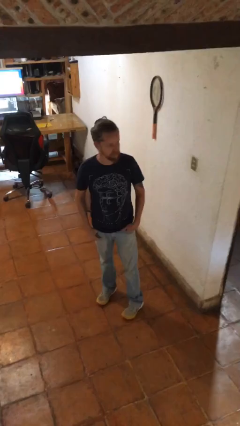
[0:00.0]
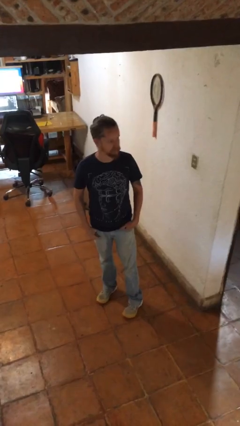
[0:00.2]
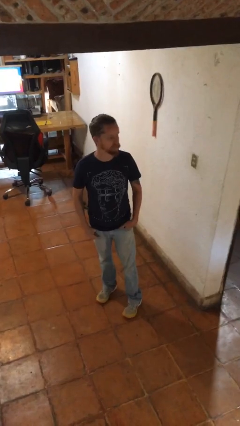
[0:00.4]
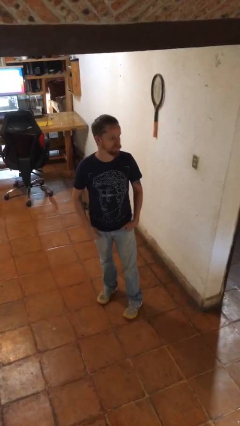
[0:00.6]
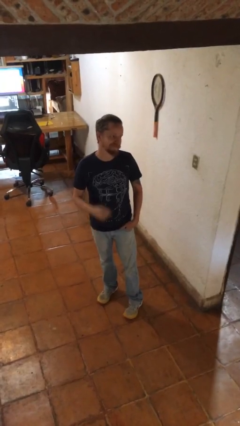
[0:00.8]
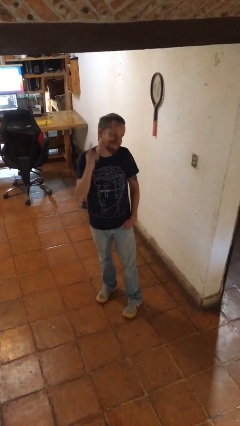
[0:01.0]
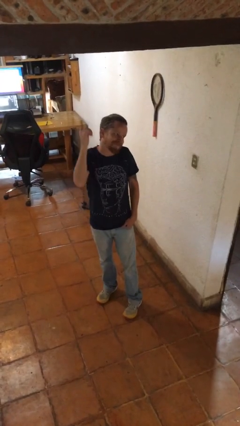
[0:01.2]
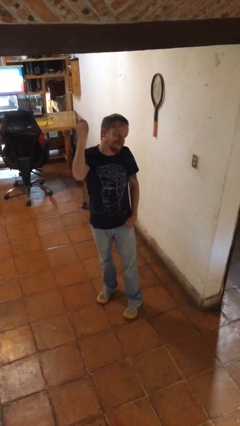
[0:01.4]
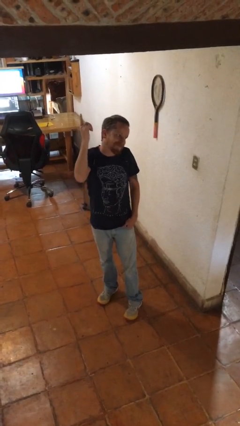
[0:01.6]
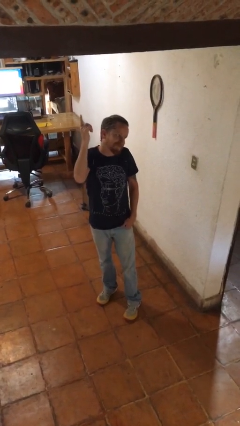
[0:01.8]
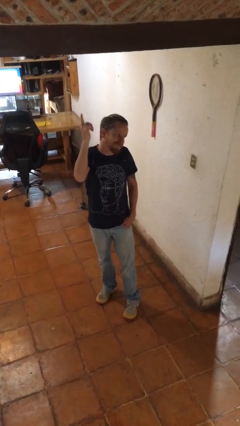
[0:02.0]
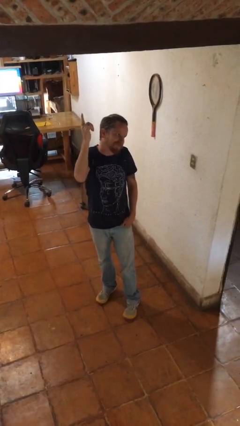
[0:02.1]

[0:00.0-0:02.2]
person gestures raise hand

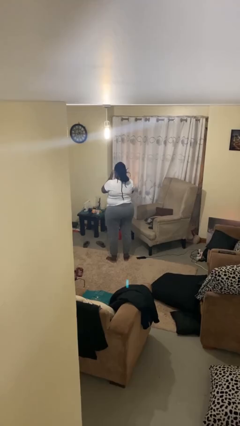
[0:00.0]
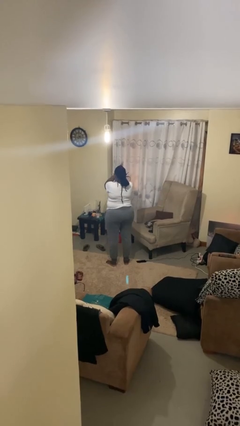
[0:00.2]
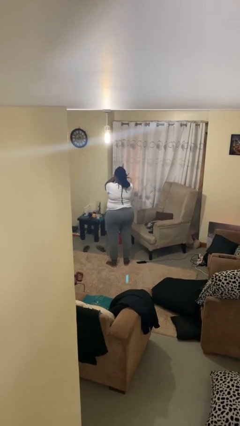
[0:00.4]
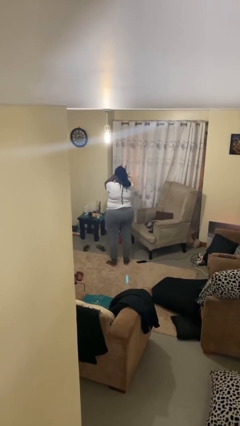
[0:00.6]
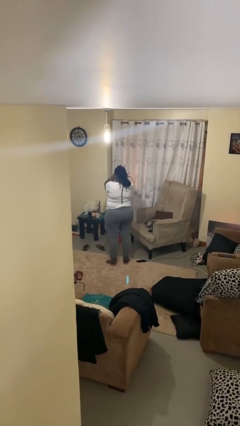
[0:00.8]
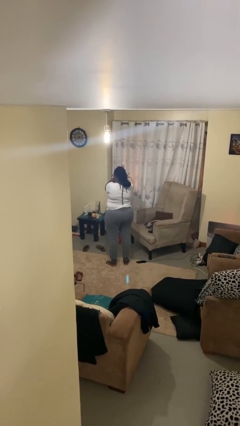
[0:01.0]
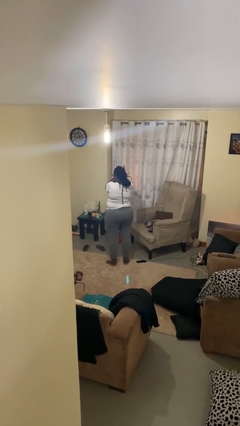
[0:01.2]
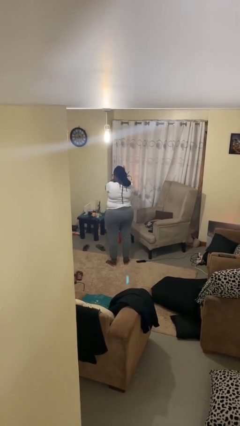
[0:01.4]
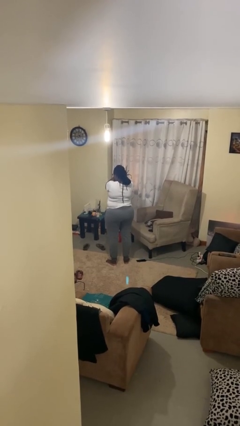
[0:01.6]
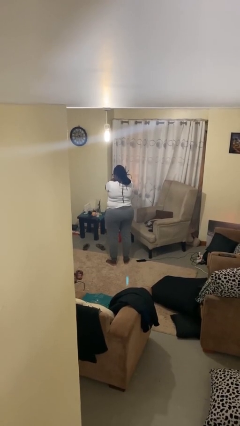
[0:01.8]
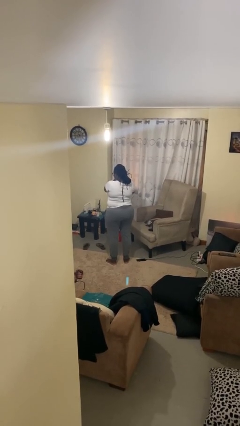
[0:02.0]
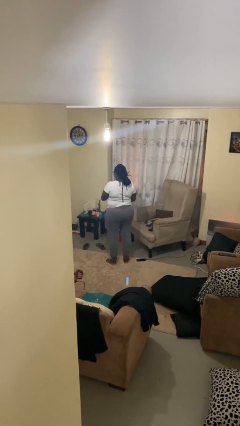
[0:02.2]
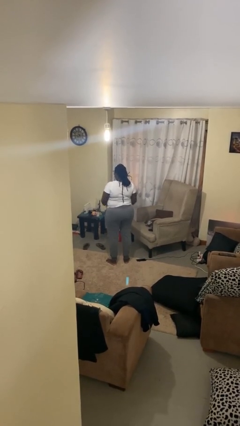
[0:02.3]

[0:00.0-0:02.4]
person claps hands

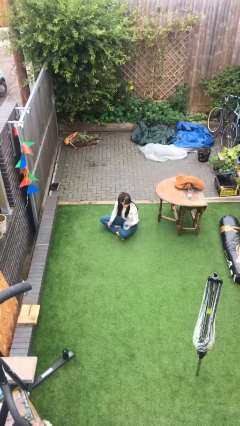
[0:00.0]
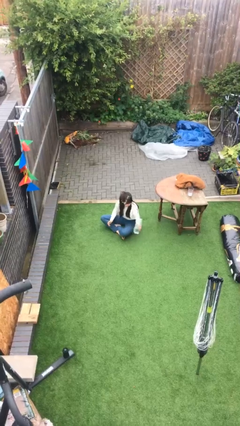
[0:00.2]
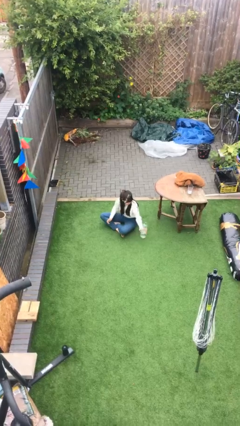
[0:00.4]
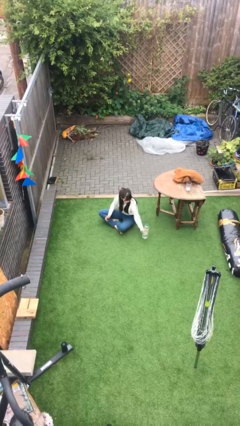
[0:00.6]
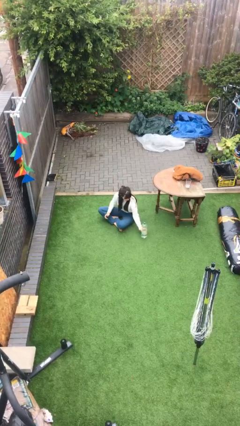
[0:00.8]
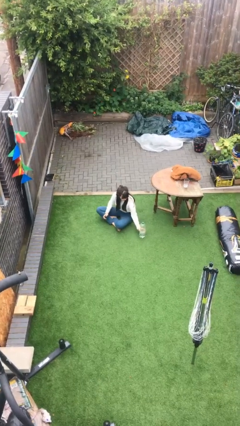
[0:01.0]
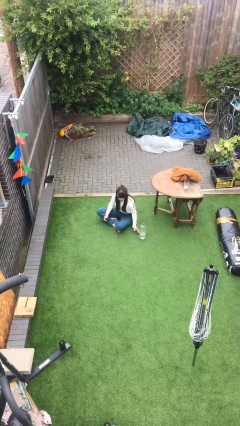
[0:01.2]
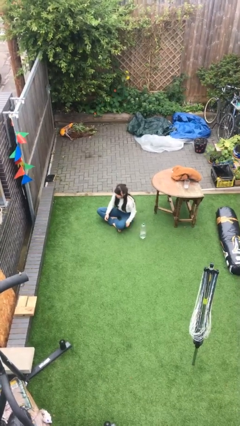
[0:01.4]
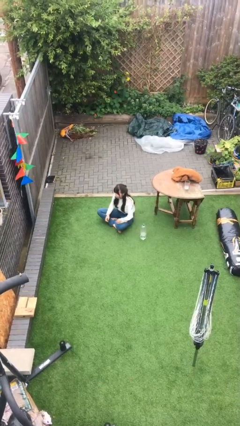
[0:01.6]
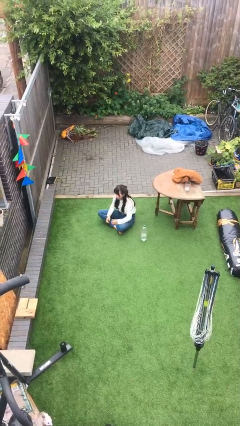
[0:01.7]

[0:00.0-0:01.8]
person puts down object on floor

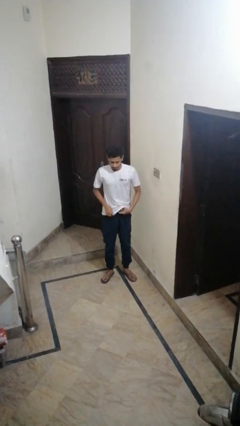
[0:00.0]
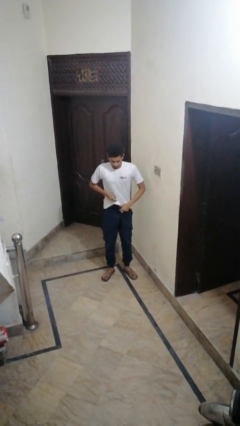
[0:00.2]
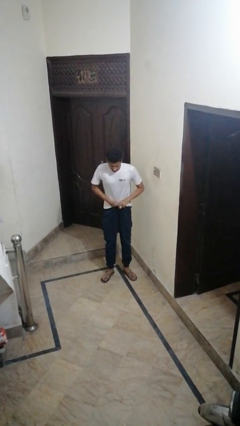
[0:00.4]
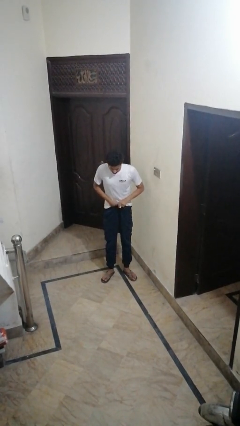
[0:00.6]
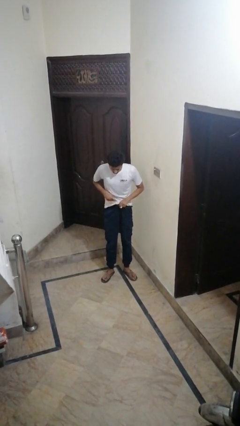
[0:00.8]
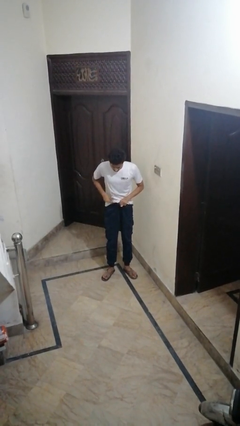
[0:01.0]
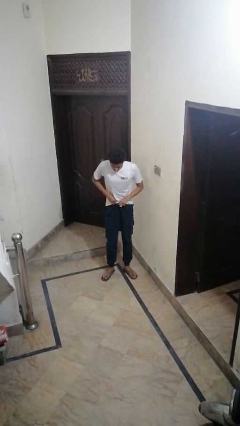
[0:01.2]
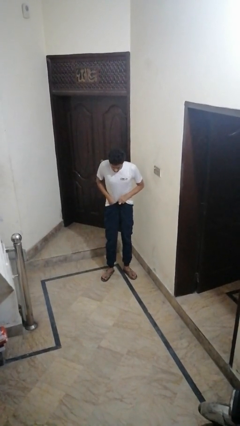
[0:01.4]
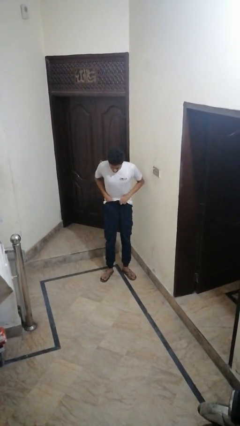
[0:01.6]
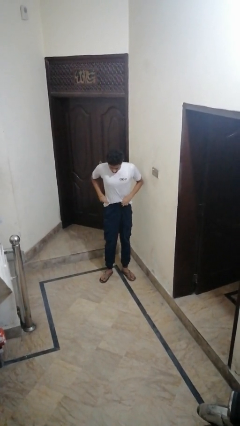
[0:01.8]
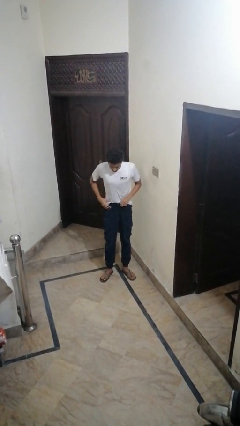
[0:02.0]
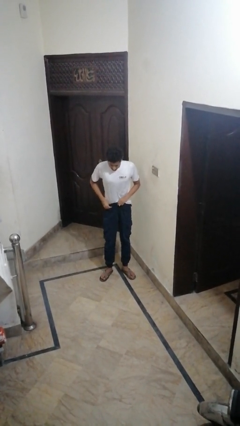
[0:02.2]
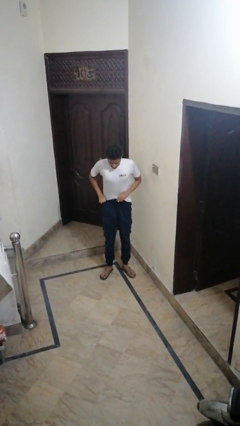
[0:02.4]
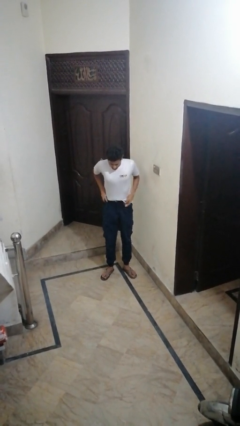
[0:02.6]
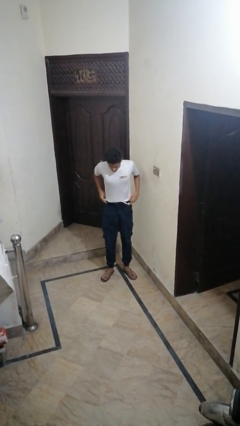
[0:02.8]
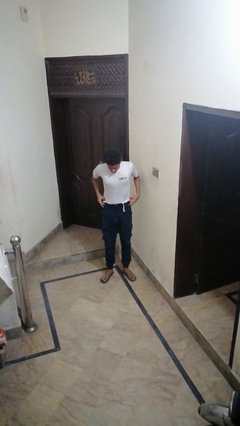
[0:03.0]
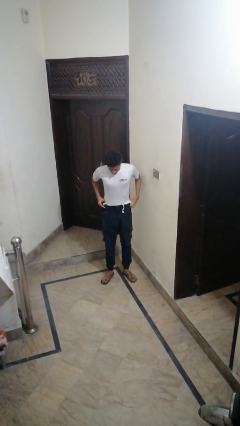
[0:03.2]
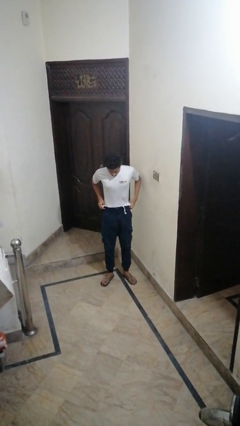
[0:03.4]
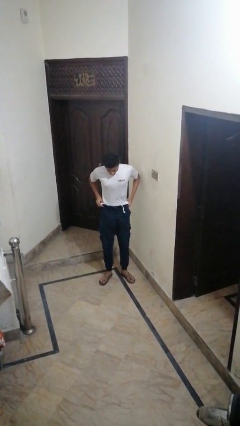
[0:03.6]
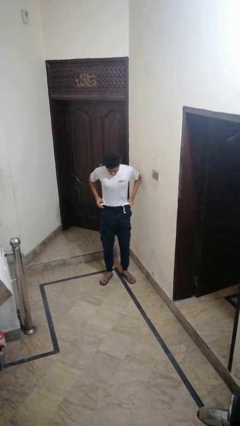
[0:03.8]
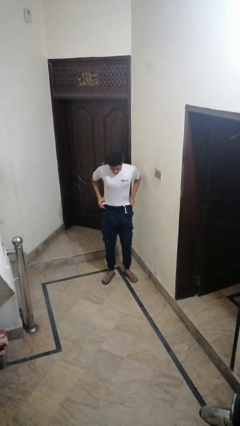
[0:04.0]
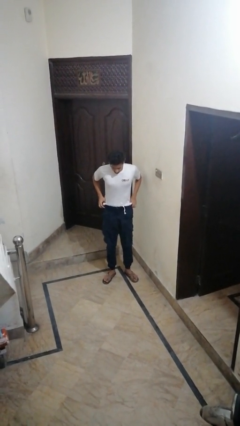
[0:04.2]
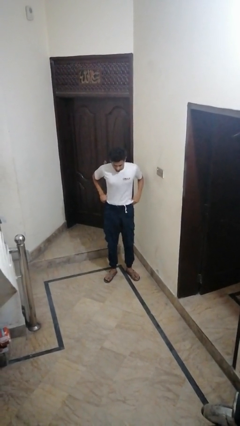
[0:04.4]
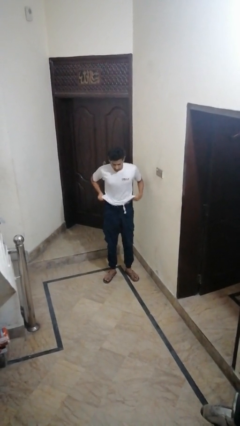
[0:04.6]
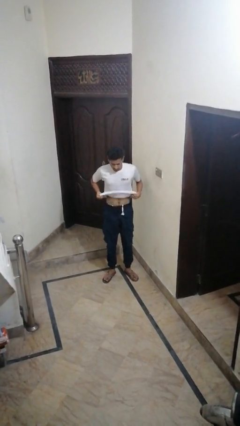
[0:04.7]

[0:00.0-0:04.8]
person tucks in shirt

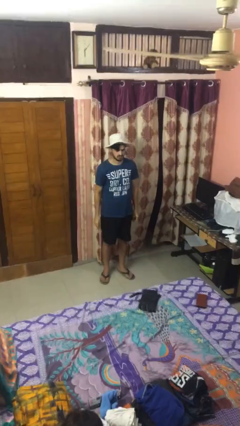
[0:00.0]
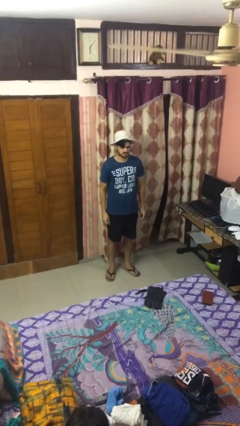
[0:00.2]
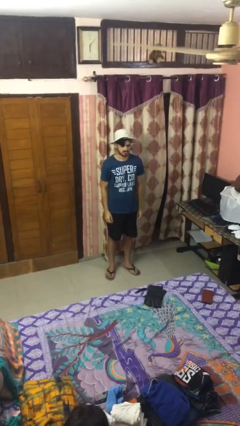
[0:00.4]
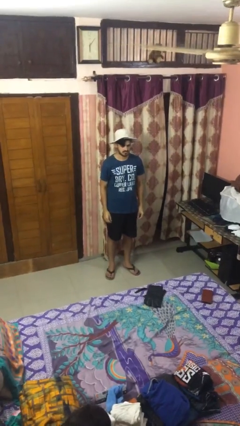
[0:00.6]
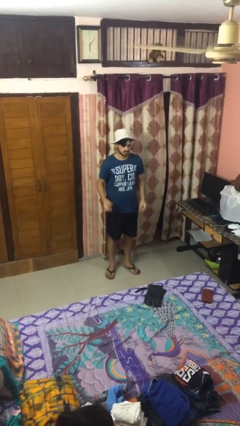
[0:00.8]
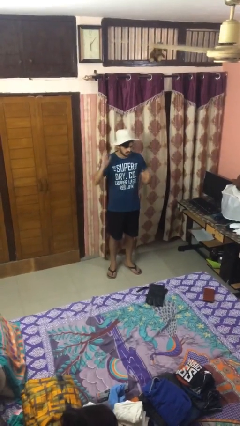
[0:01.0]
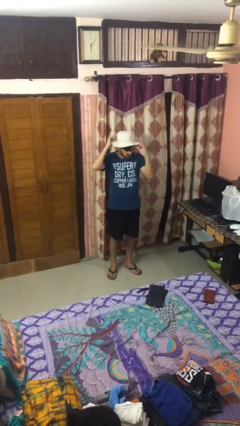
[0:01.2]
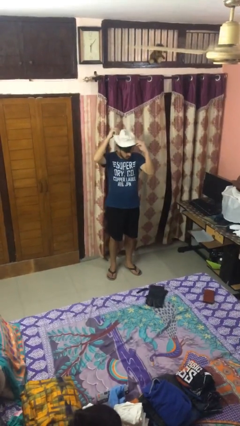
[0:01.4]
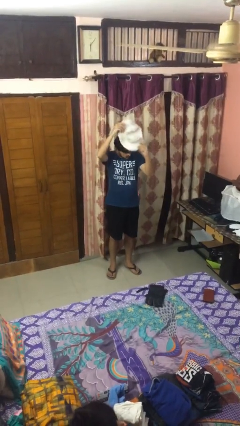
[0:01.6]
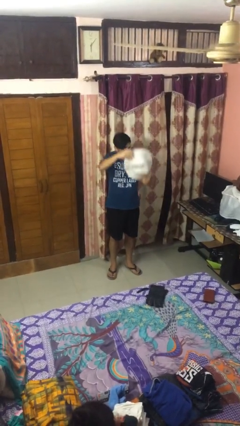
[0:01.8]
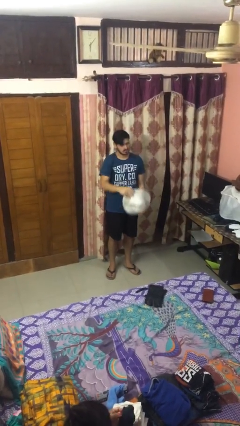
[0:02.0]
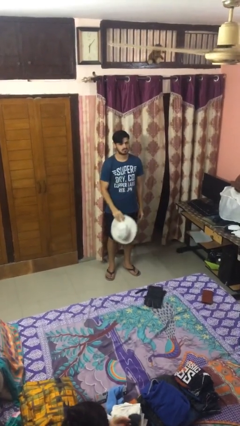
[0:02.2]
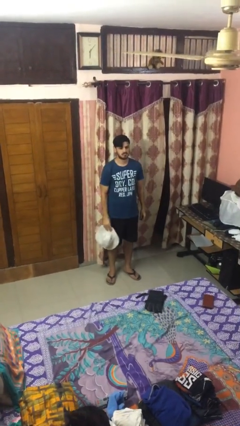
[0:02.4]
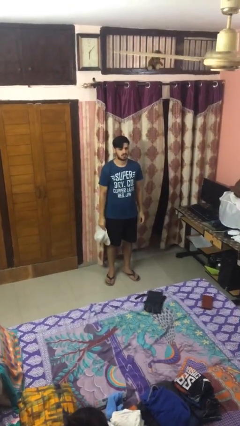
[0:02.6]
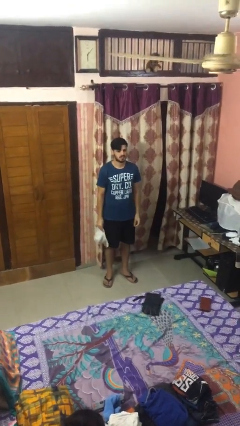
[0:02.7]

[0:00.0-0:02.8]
person takes off hat

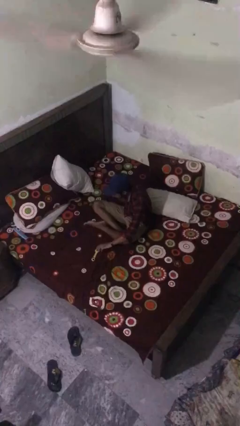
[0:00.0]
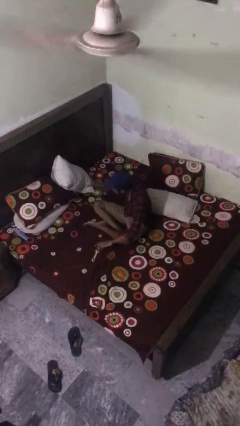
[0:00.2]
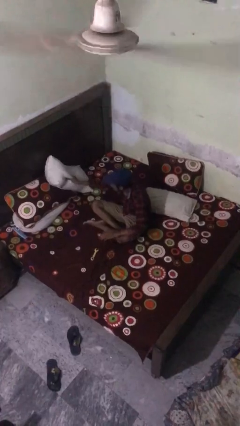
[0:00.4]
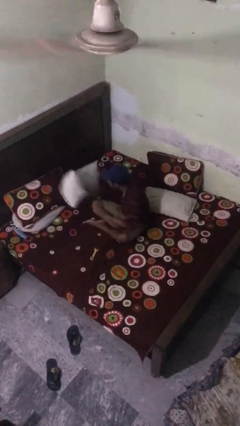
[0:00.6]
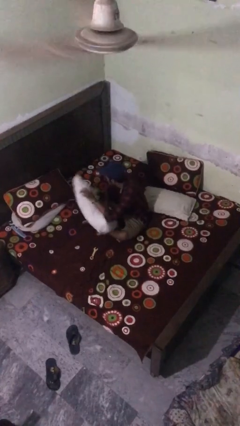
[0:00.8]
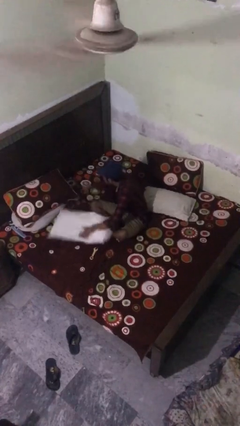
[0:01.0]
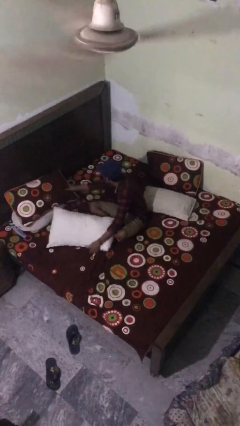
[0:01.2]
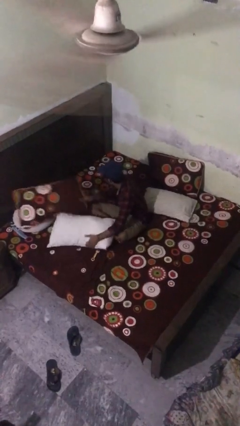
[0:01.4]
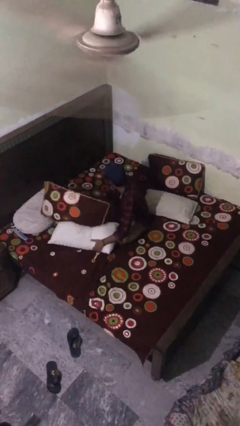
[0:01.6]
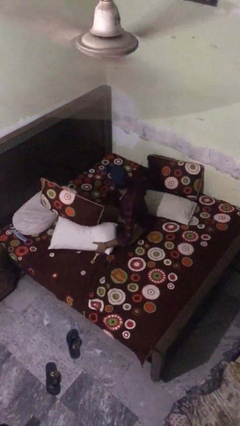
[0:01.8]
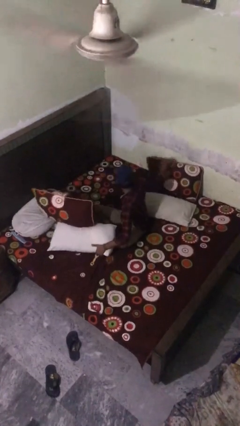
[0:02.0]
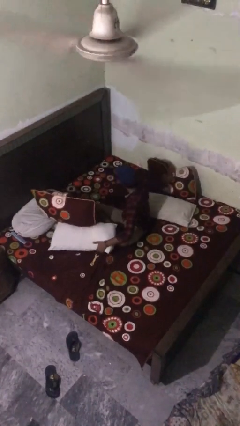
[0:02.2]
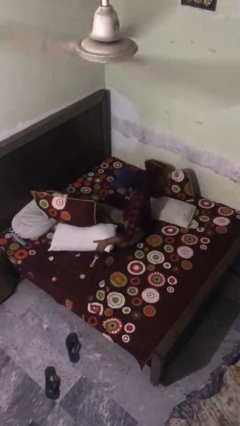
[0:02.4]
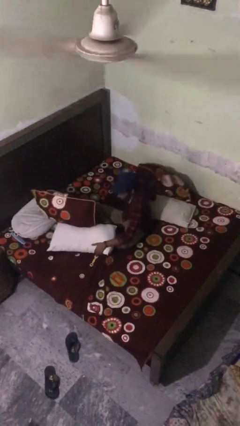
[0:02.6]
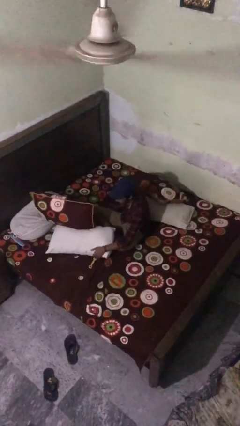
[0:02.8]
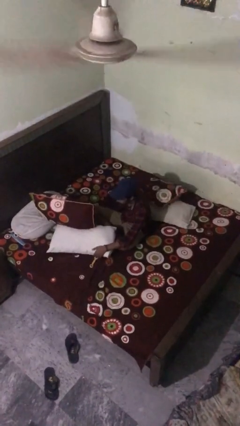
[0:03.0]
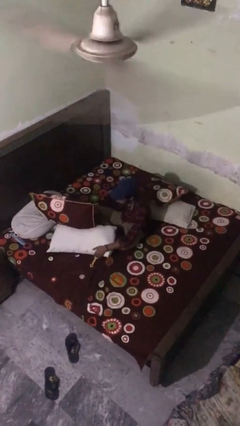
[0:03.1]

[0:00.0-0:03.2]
person searches under bed

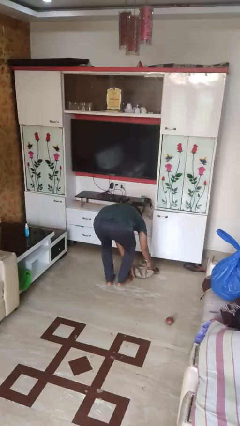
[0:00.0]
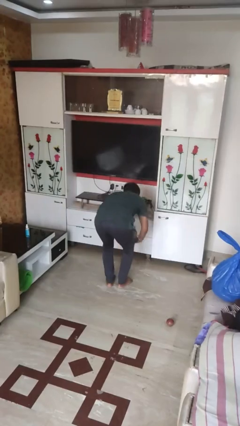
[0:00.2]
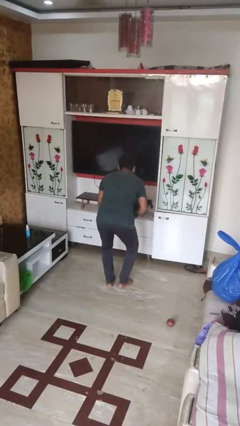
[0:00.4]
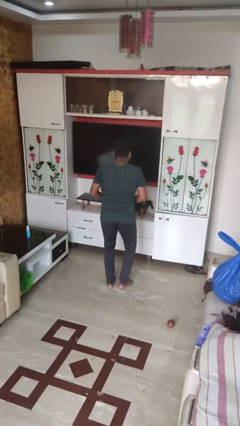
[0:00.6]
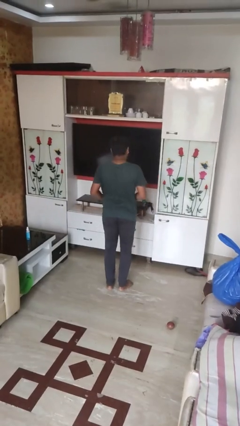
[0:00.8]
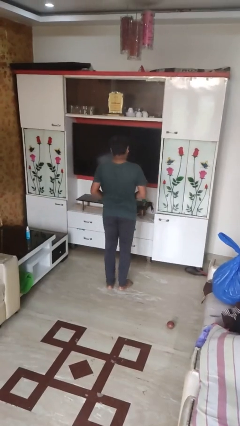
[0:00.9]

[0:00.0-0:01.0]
person picks up object from floor
